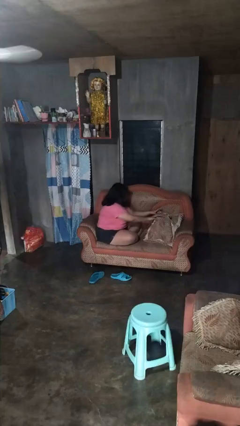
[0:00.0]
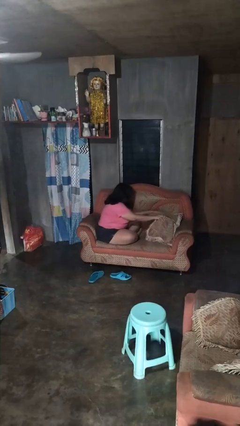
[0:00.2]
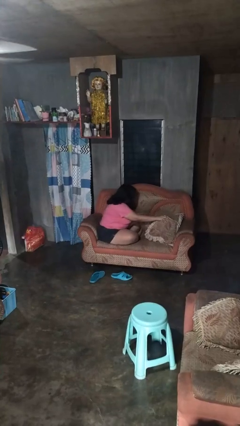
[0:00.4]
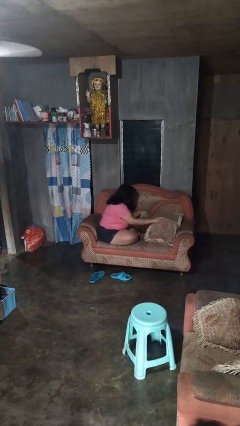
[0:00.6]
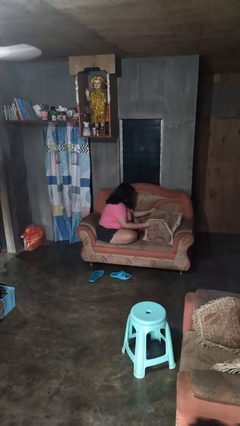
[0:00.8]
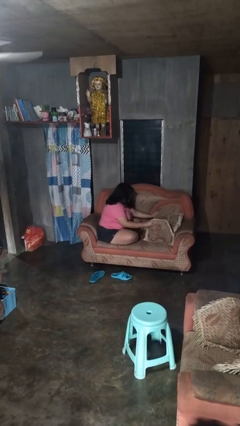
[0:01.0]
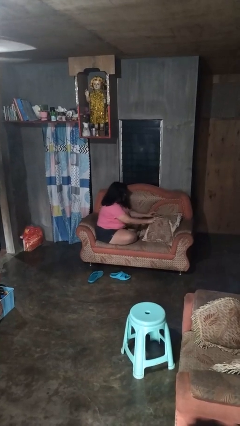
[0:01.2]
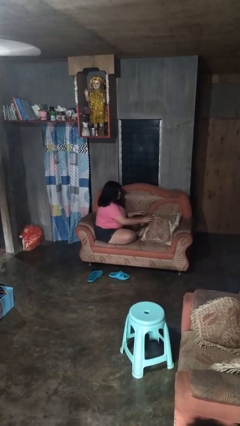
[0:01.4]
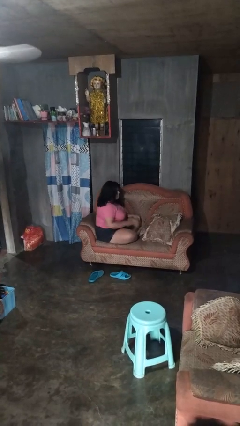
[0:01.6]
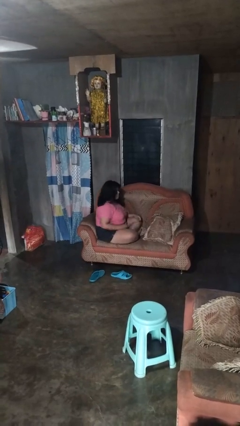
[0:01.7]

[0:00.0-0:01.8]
person searches in couch

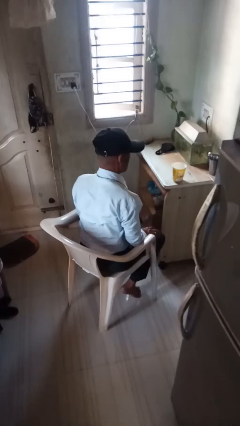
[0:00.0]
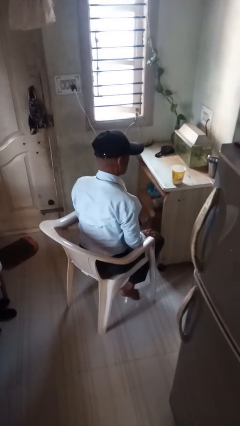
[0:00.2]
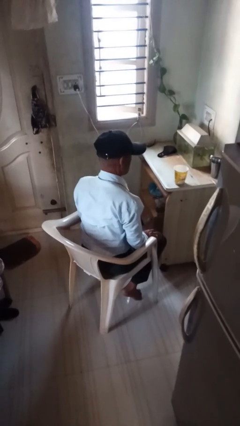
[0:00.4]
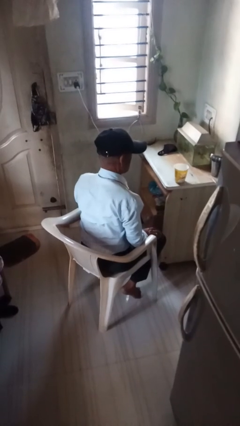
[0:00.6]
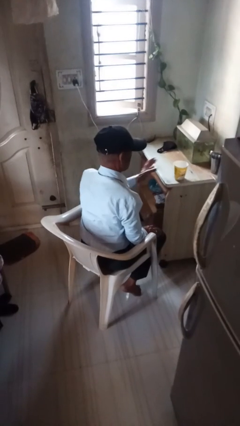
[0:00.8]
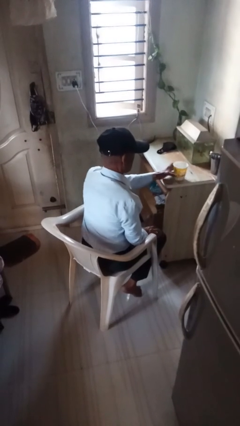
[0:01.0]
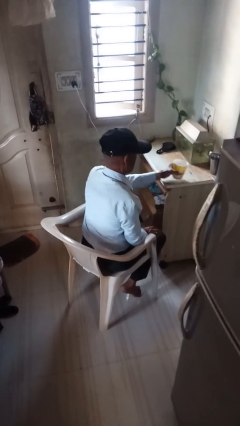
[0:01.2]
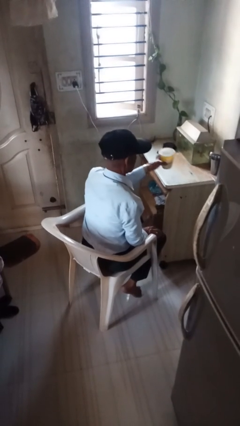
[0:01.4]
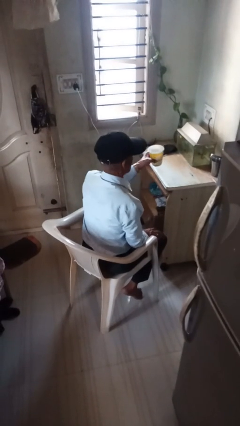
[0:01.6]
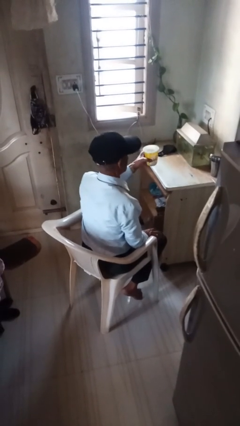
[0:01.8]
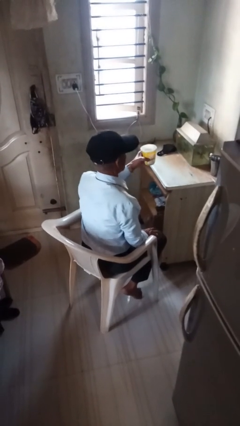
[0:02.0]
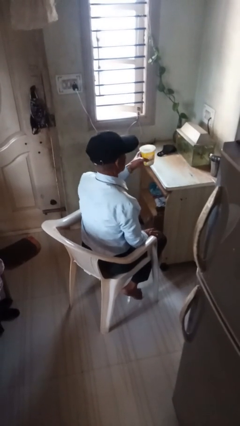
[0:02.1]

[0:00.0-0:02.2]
person picks up object from table

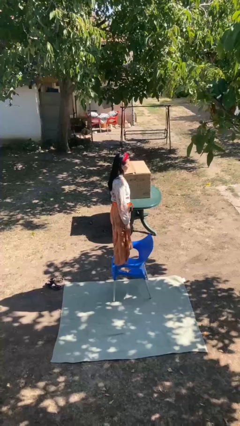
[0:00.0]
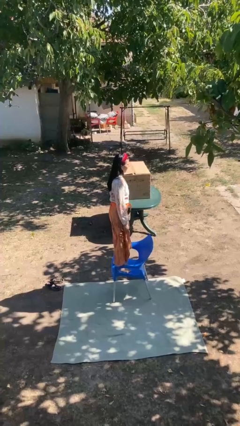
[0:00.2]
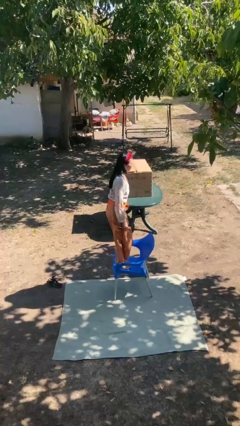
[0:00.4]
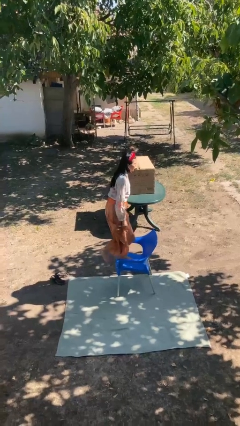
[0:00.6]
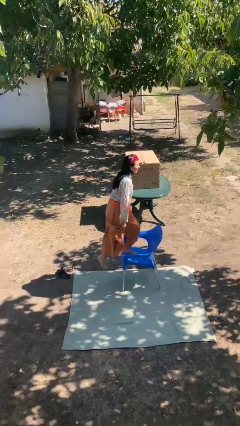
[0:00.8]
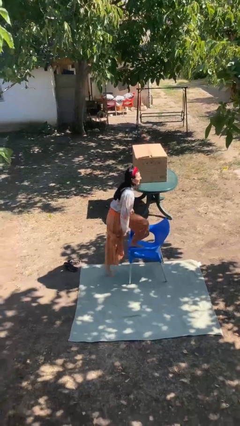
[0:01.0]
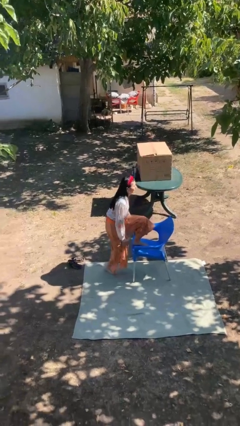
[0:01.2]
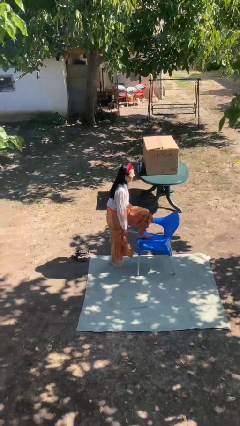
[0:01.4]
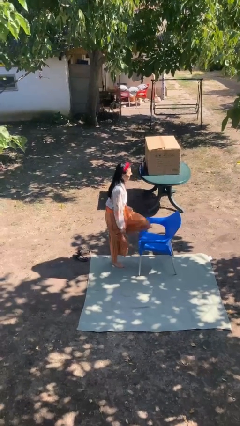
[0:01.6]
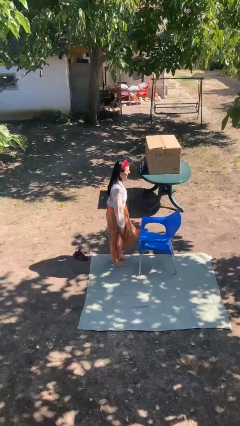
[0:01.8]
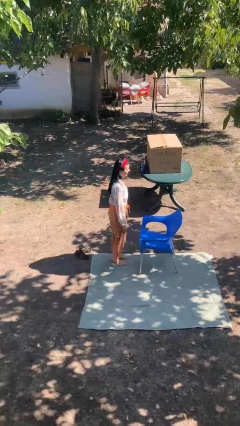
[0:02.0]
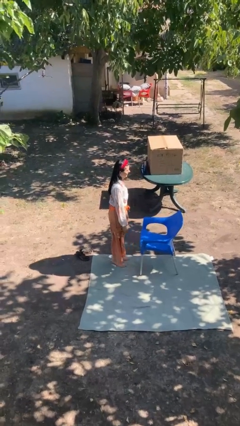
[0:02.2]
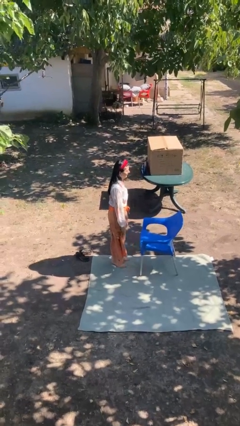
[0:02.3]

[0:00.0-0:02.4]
person climbs off chair

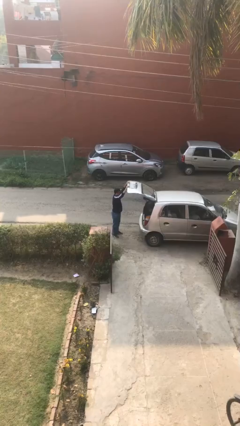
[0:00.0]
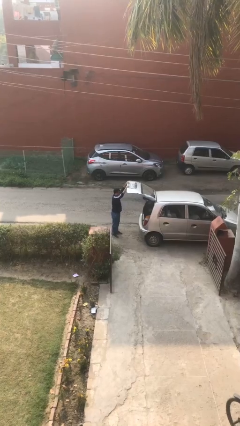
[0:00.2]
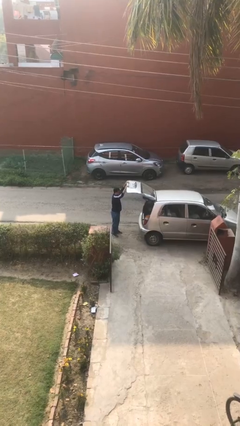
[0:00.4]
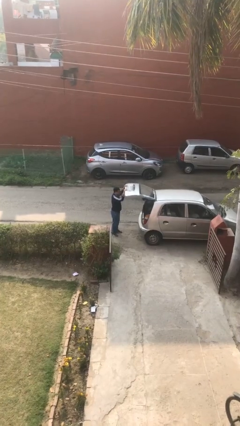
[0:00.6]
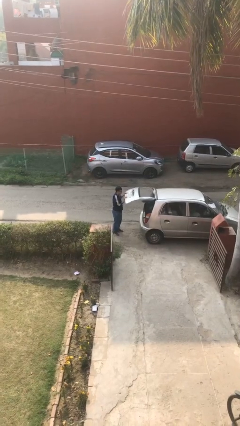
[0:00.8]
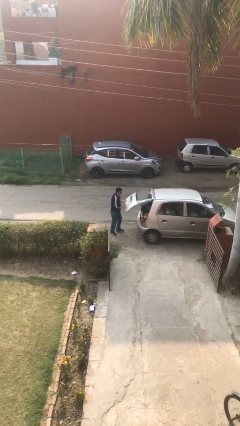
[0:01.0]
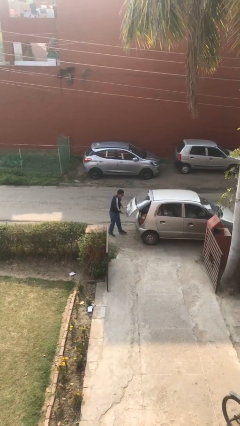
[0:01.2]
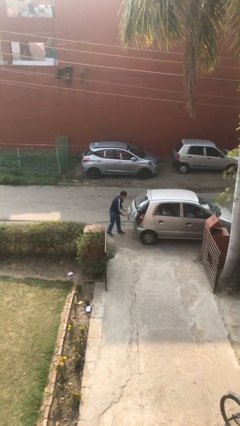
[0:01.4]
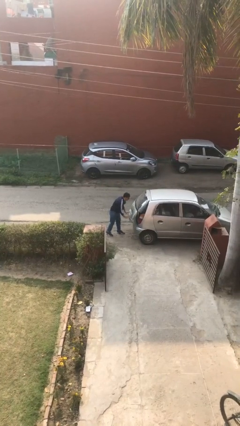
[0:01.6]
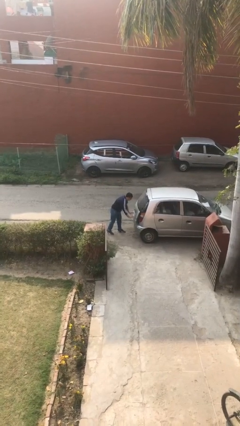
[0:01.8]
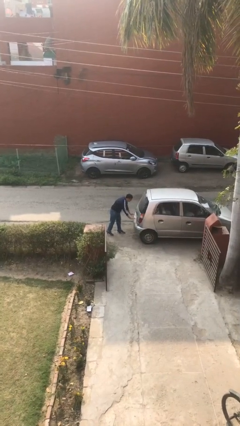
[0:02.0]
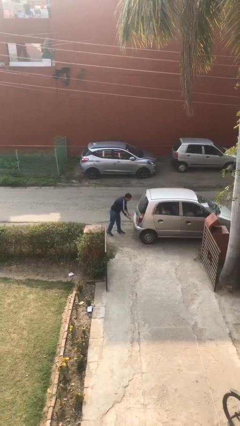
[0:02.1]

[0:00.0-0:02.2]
person closes car trunk

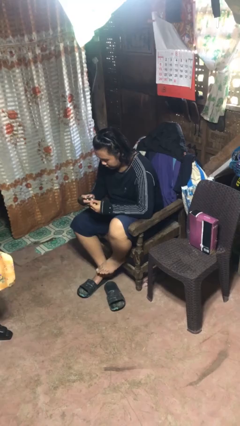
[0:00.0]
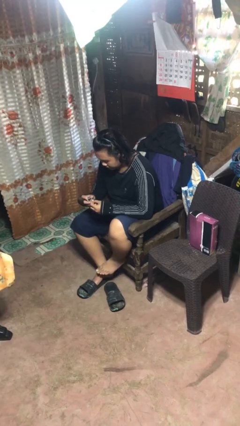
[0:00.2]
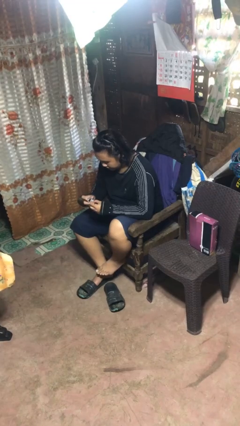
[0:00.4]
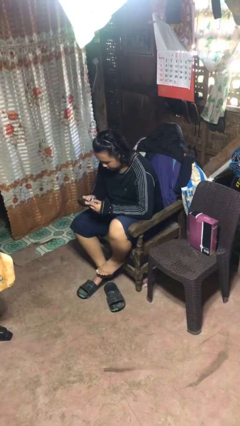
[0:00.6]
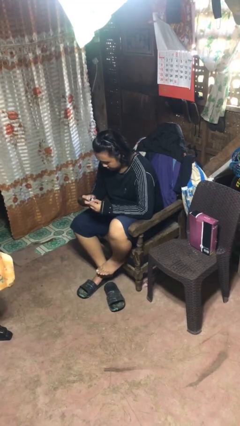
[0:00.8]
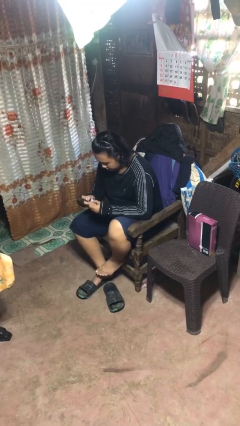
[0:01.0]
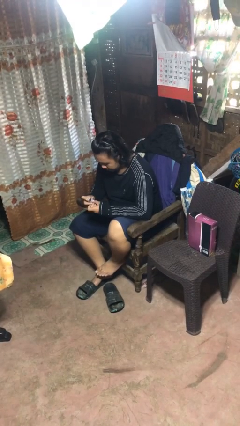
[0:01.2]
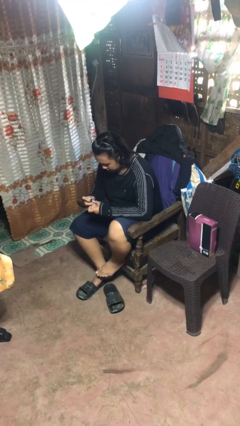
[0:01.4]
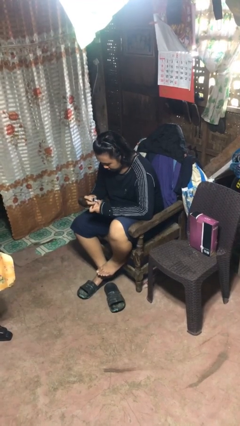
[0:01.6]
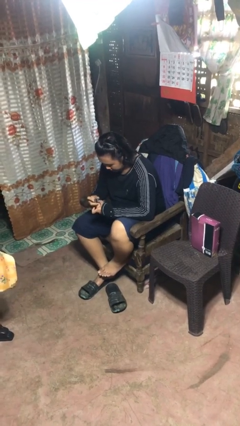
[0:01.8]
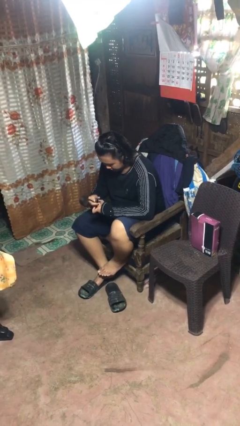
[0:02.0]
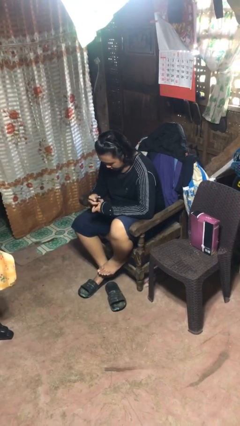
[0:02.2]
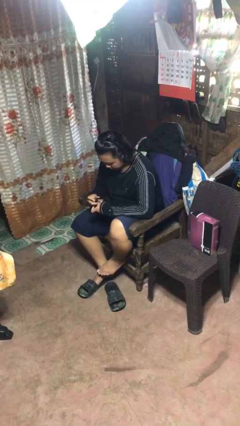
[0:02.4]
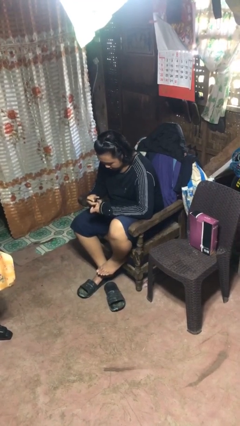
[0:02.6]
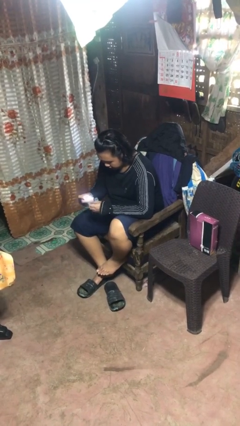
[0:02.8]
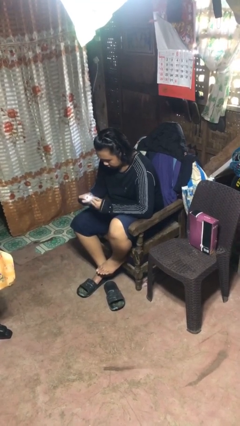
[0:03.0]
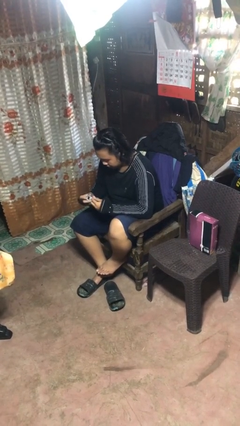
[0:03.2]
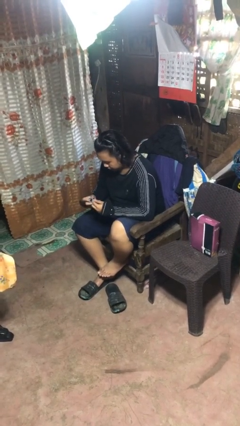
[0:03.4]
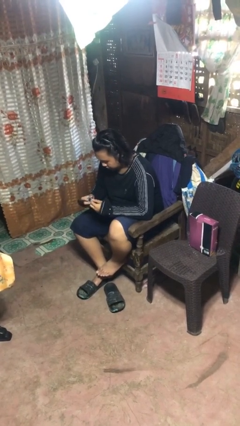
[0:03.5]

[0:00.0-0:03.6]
person files fingernails

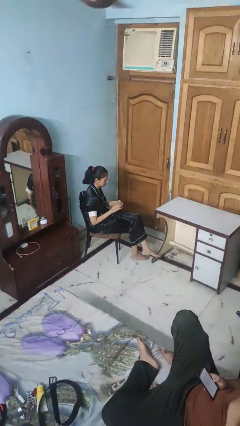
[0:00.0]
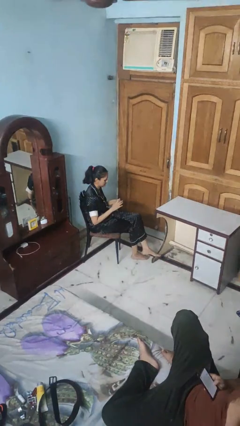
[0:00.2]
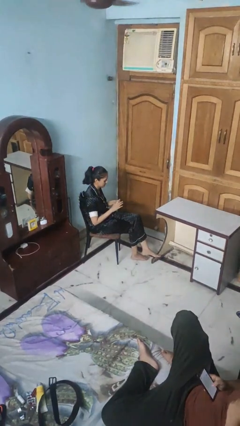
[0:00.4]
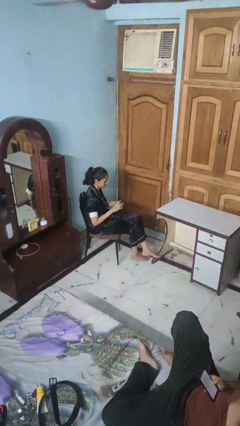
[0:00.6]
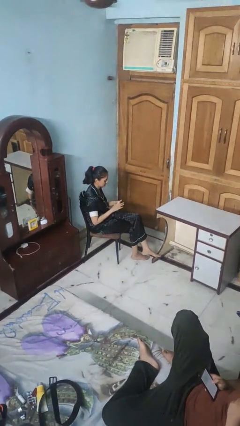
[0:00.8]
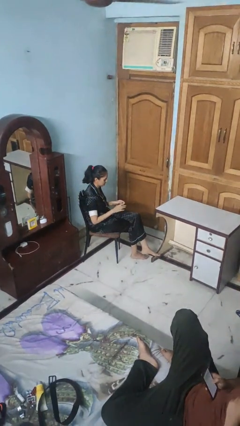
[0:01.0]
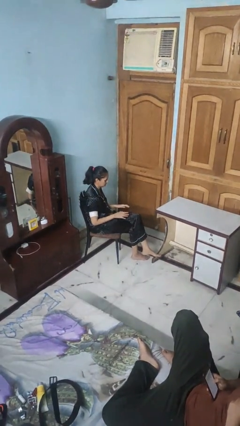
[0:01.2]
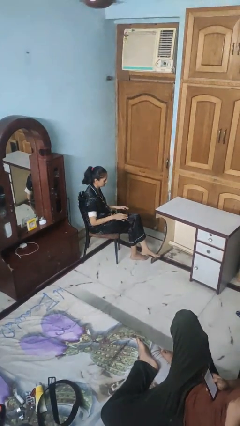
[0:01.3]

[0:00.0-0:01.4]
person puts on ring

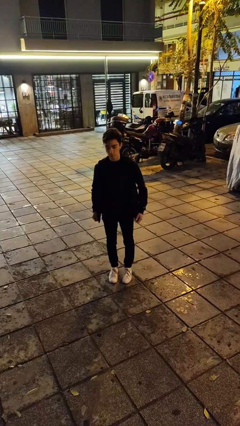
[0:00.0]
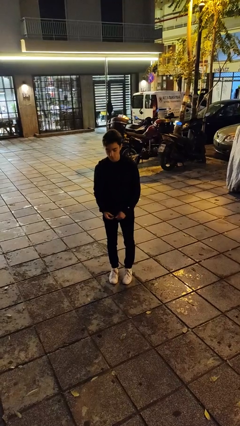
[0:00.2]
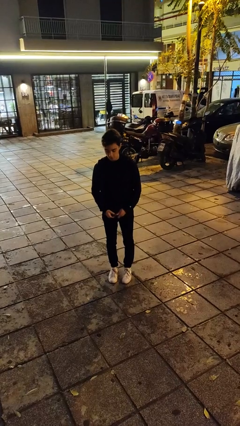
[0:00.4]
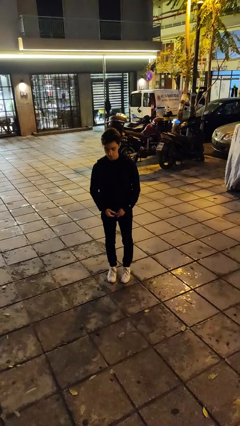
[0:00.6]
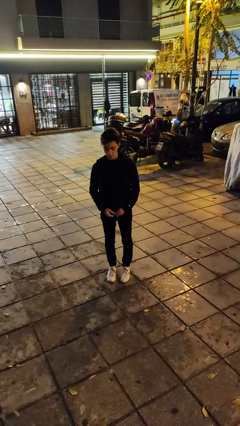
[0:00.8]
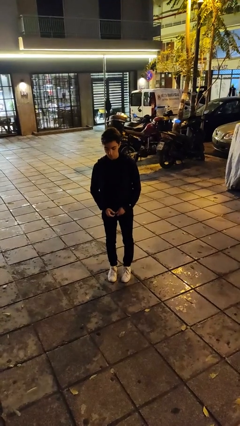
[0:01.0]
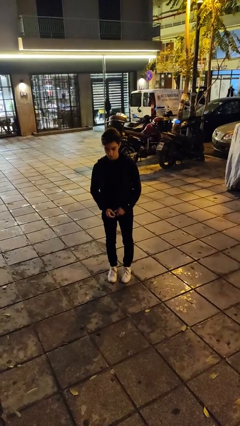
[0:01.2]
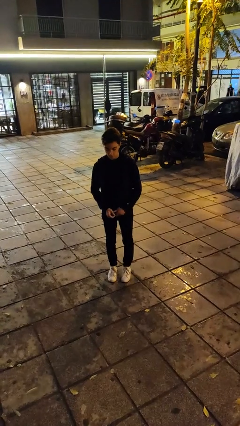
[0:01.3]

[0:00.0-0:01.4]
person puts on jacket

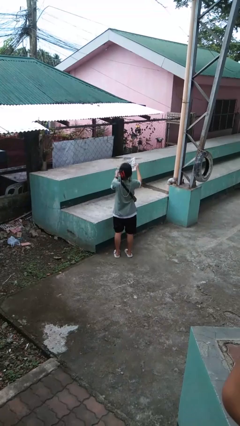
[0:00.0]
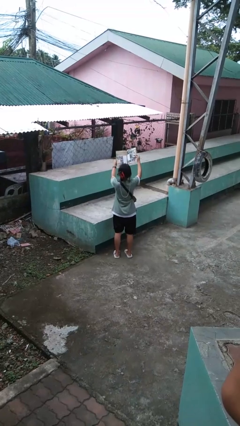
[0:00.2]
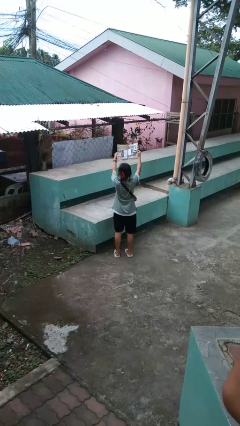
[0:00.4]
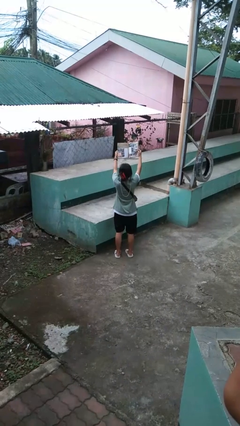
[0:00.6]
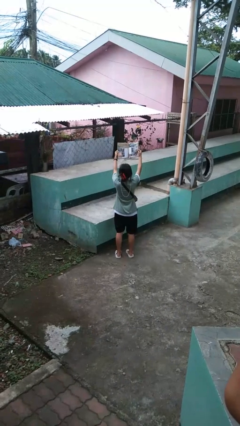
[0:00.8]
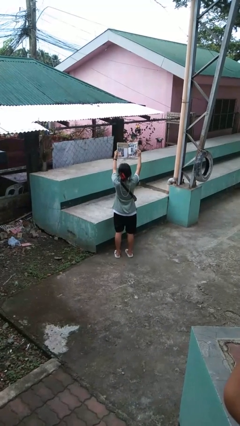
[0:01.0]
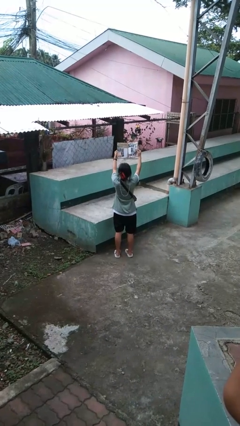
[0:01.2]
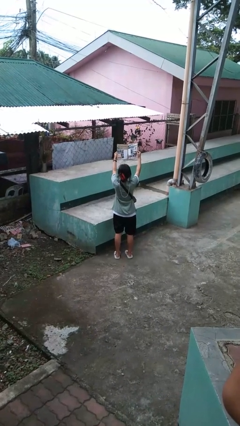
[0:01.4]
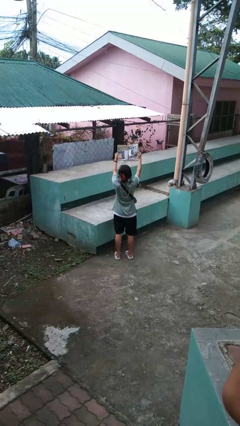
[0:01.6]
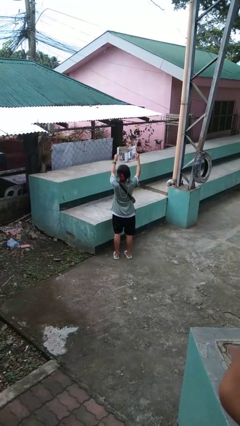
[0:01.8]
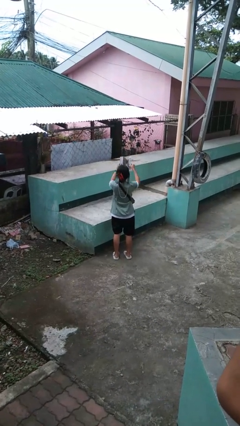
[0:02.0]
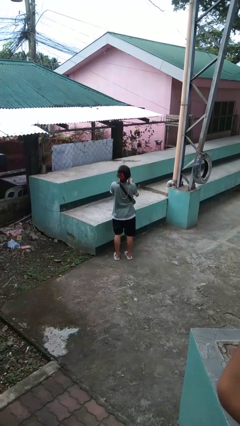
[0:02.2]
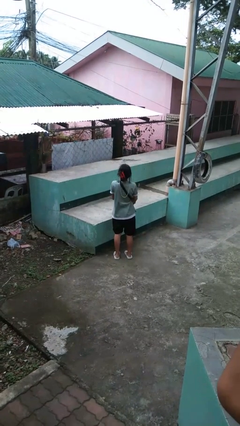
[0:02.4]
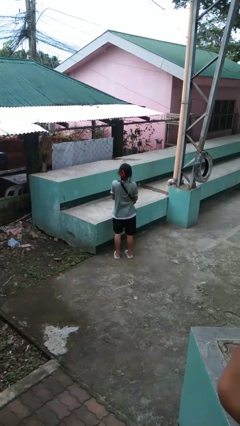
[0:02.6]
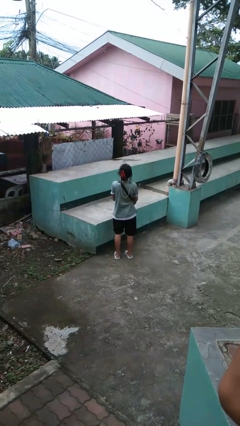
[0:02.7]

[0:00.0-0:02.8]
person reads magazine
